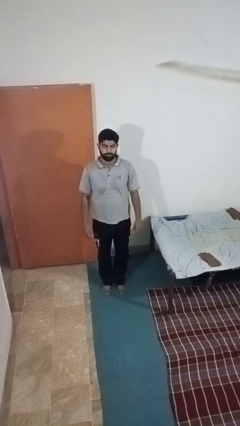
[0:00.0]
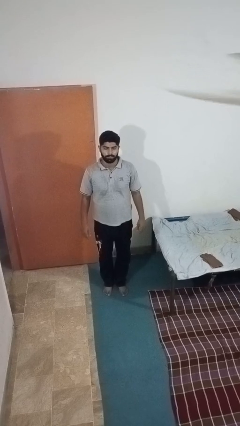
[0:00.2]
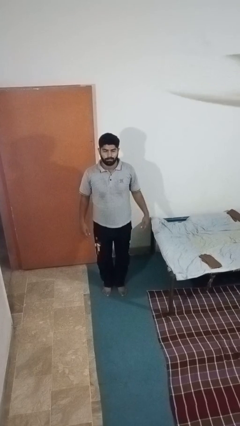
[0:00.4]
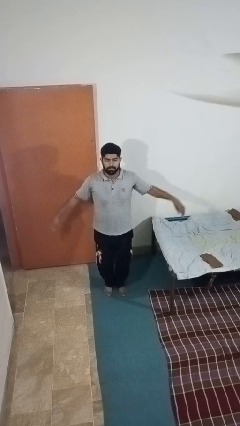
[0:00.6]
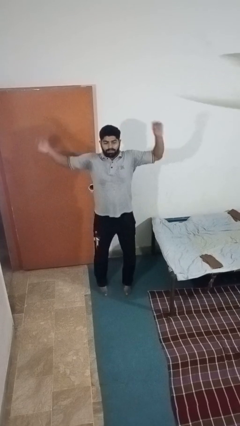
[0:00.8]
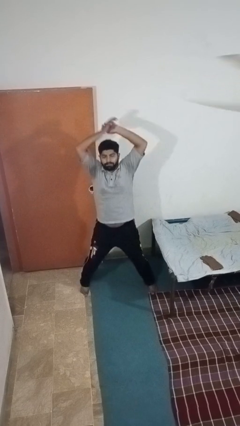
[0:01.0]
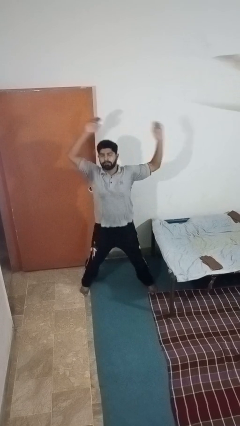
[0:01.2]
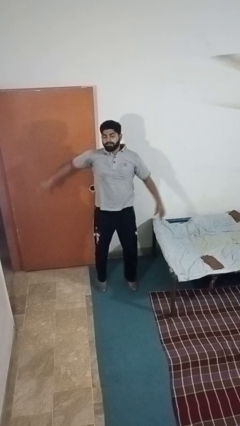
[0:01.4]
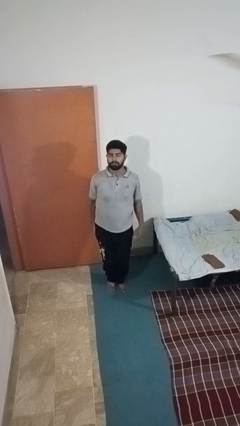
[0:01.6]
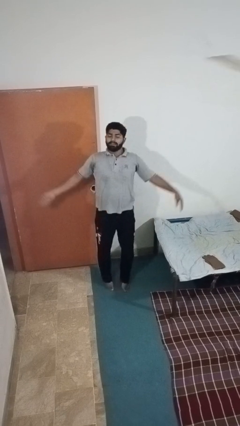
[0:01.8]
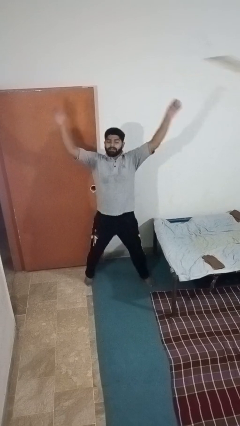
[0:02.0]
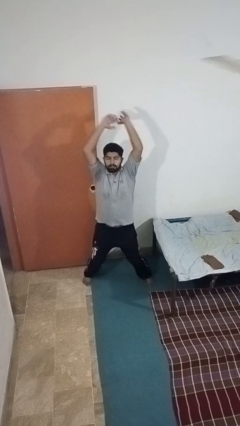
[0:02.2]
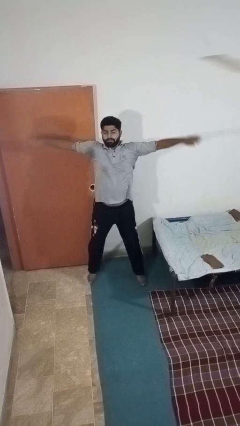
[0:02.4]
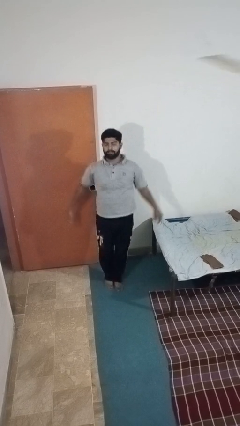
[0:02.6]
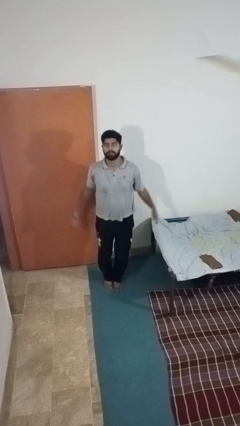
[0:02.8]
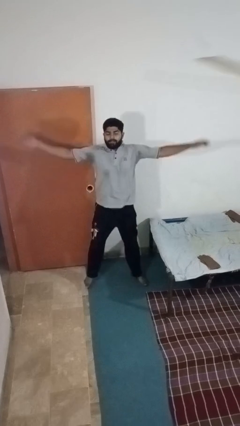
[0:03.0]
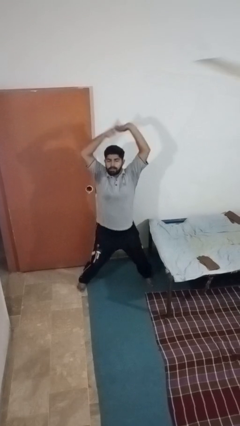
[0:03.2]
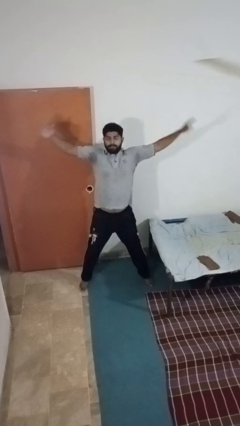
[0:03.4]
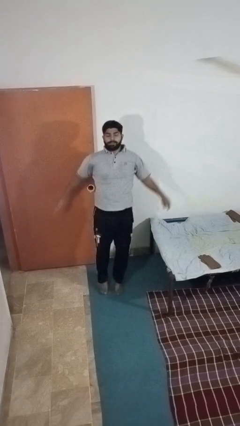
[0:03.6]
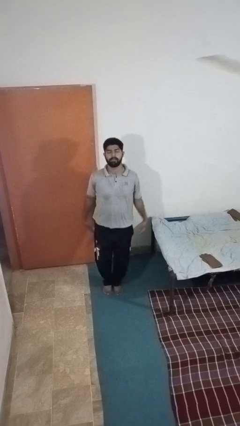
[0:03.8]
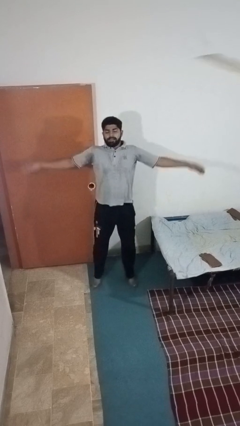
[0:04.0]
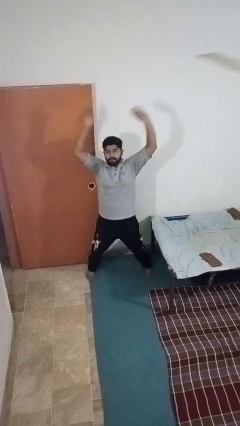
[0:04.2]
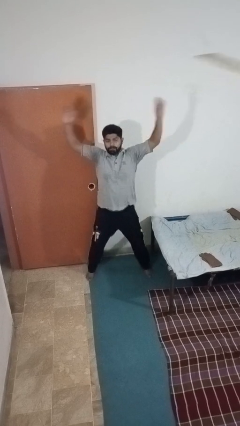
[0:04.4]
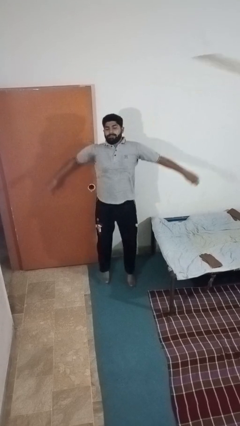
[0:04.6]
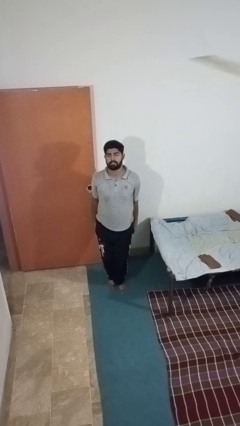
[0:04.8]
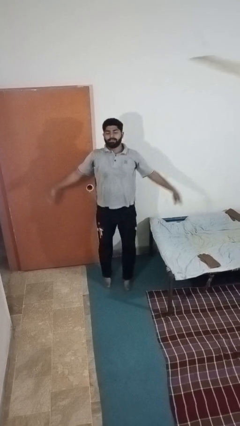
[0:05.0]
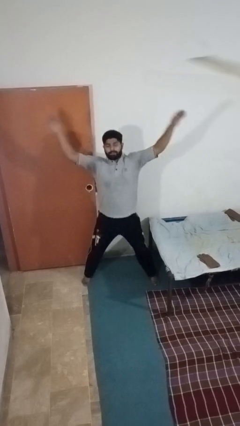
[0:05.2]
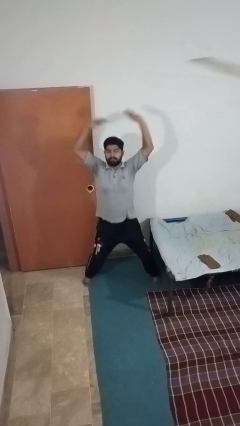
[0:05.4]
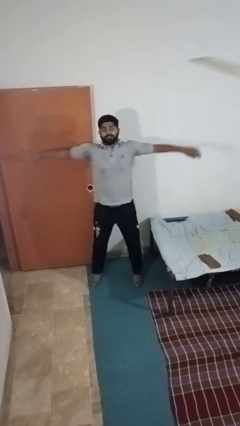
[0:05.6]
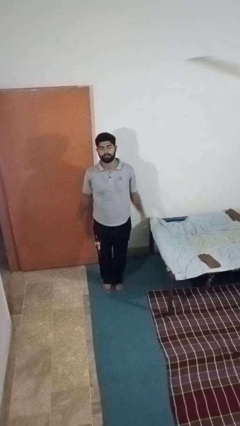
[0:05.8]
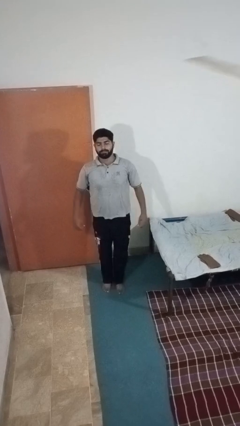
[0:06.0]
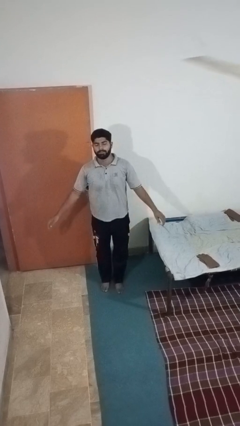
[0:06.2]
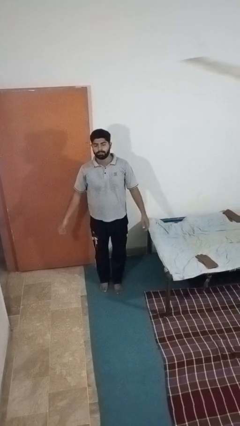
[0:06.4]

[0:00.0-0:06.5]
person exercises with jumping jacks

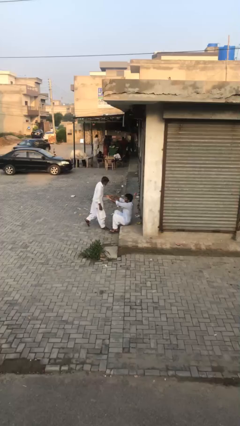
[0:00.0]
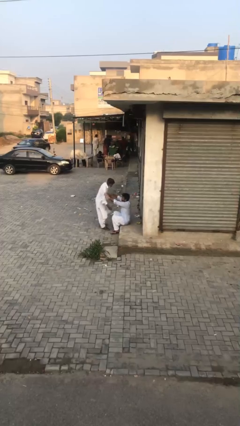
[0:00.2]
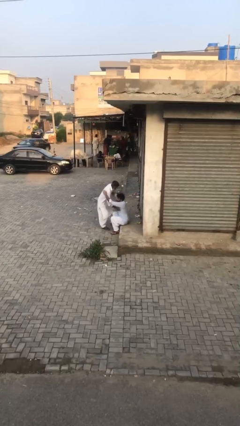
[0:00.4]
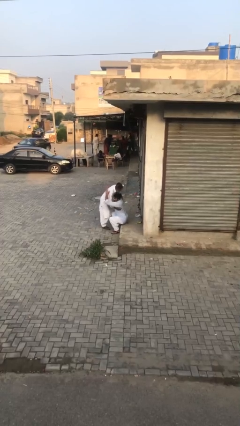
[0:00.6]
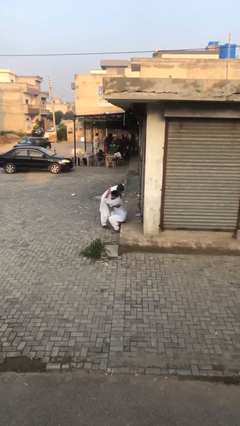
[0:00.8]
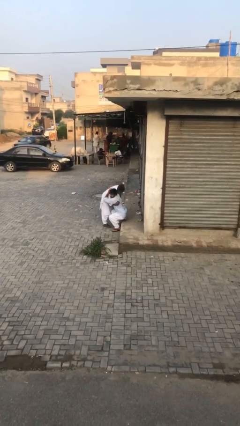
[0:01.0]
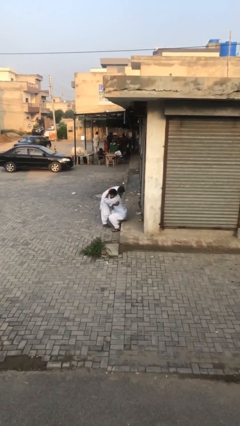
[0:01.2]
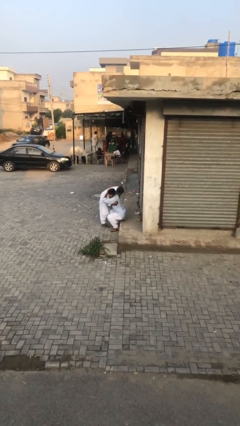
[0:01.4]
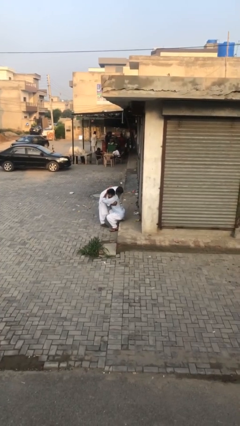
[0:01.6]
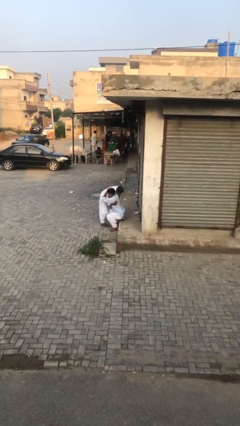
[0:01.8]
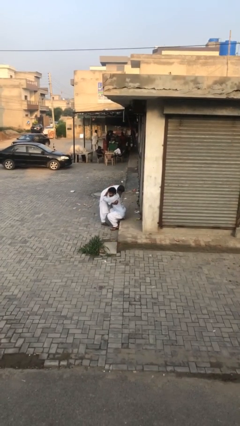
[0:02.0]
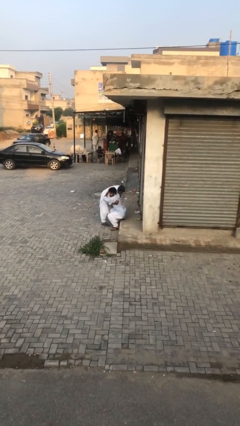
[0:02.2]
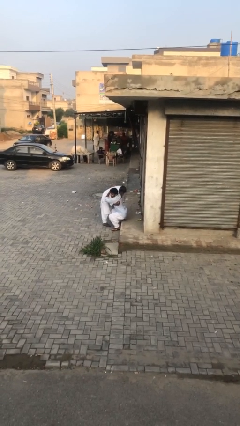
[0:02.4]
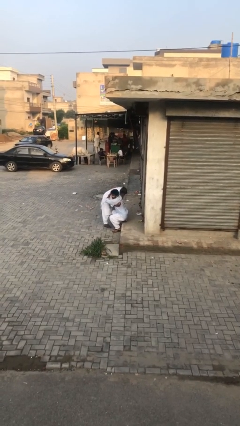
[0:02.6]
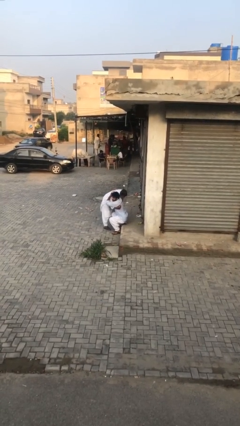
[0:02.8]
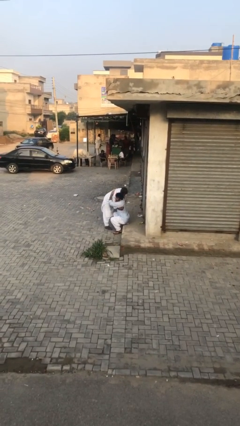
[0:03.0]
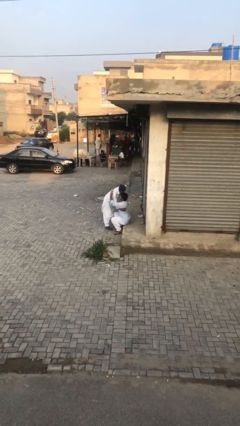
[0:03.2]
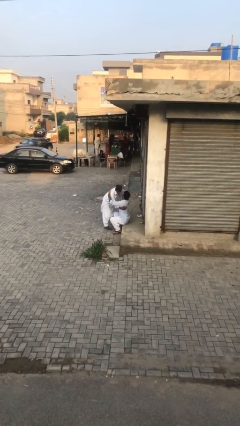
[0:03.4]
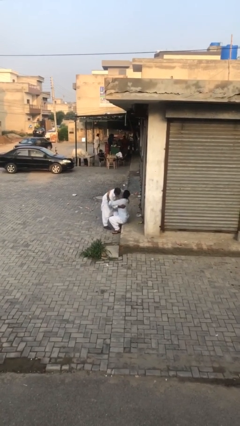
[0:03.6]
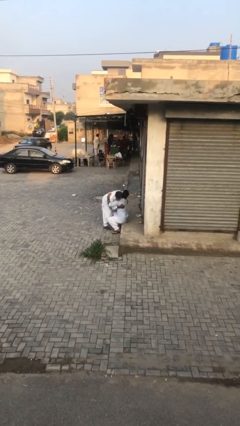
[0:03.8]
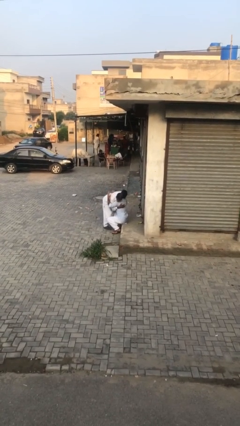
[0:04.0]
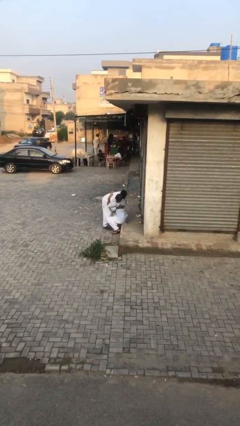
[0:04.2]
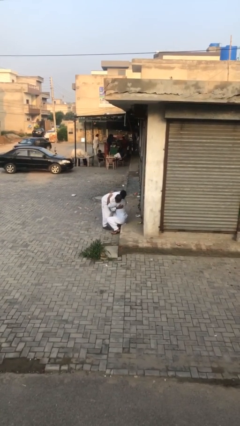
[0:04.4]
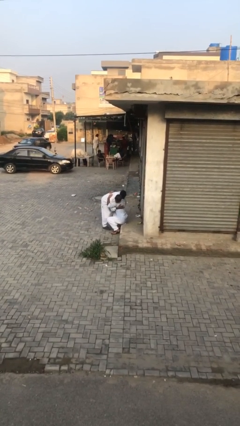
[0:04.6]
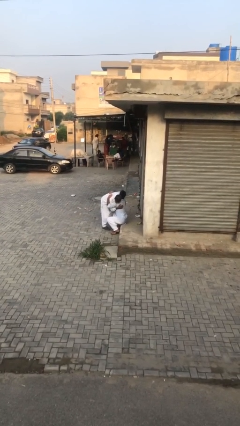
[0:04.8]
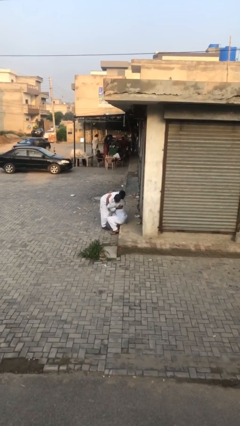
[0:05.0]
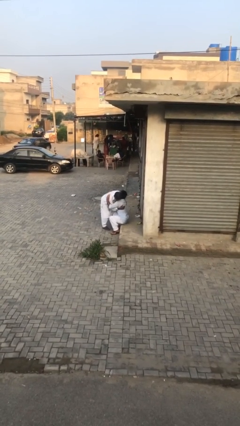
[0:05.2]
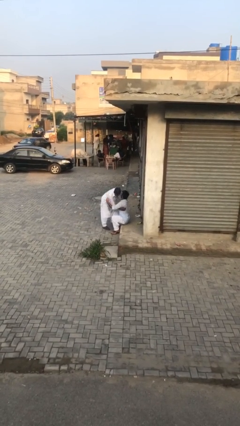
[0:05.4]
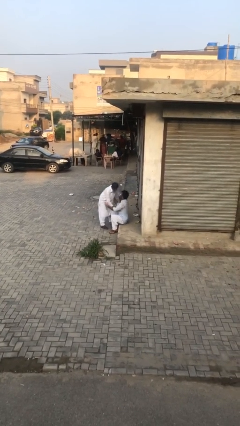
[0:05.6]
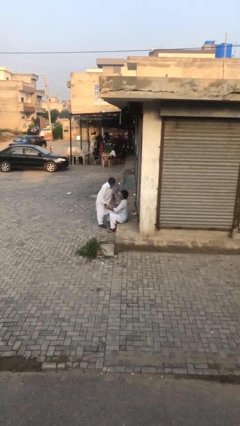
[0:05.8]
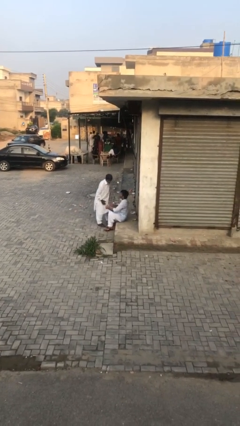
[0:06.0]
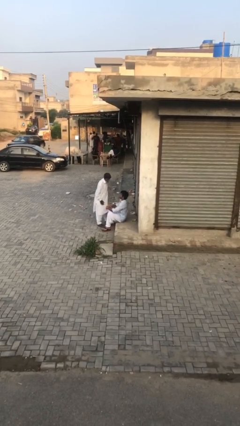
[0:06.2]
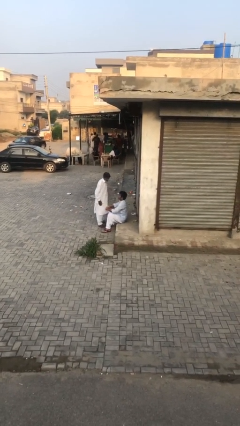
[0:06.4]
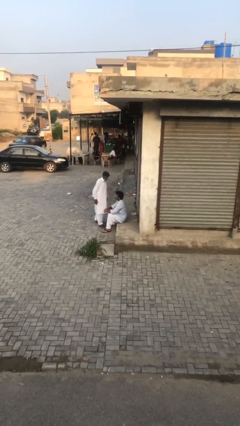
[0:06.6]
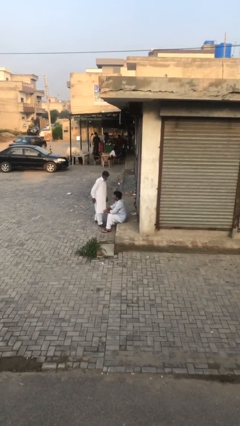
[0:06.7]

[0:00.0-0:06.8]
person embraces person

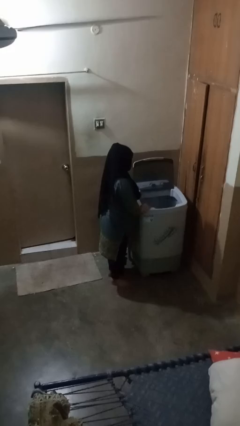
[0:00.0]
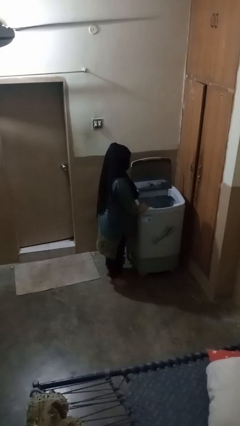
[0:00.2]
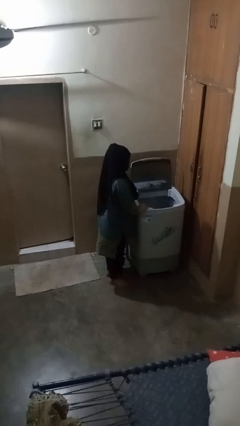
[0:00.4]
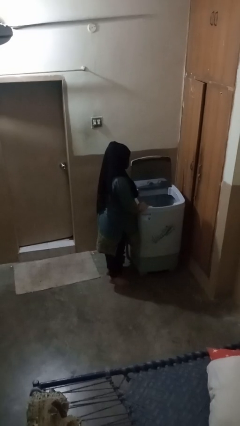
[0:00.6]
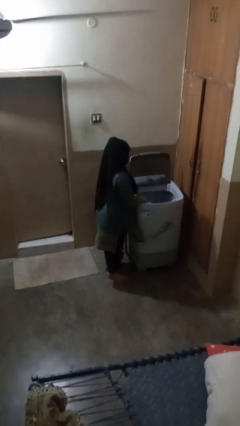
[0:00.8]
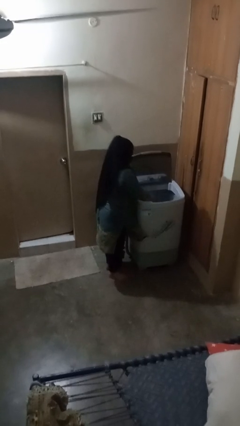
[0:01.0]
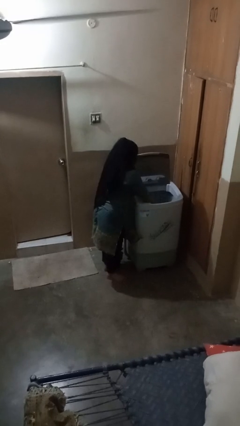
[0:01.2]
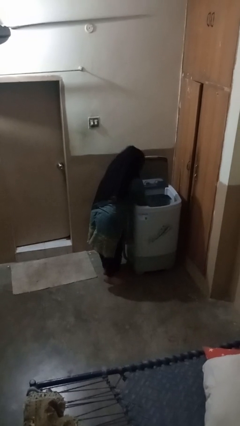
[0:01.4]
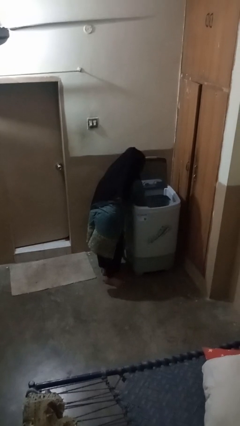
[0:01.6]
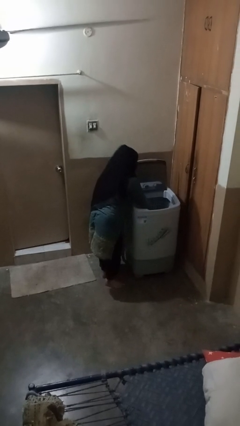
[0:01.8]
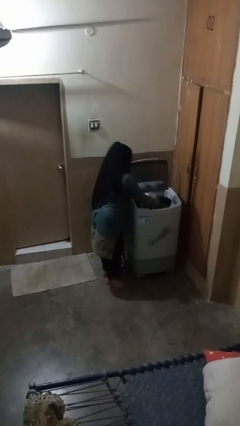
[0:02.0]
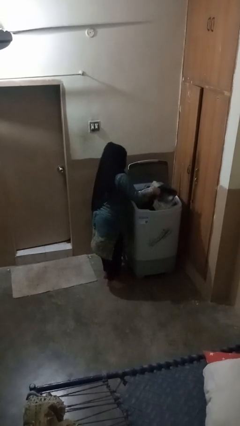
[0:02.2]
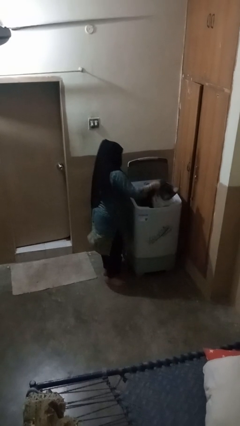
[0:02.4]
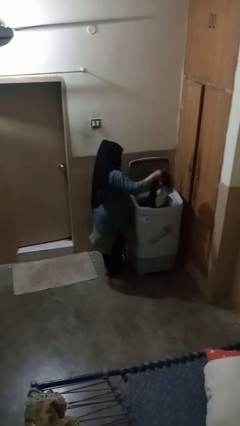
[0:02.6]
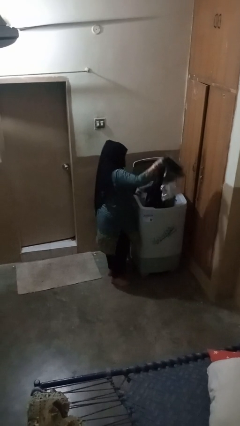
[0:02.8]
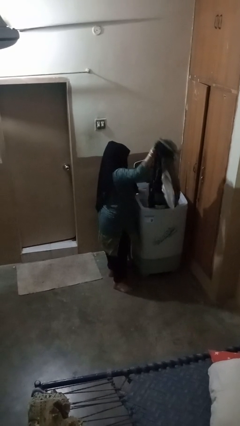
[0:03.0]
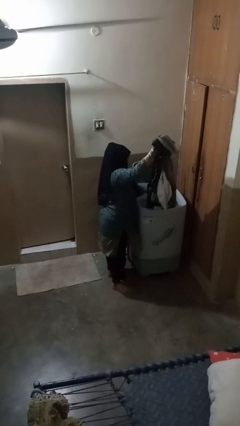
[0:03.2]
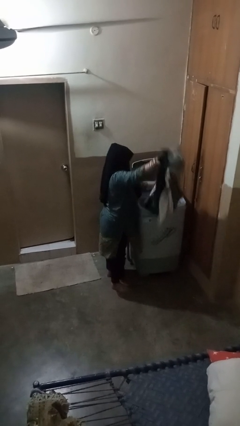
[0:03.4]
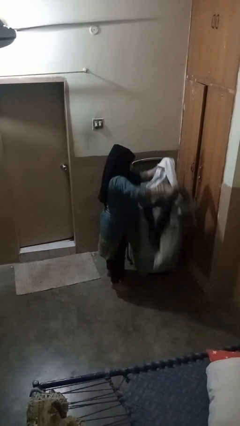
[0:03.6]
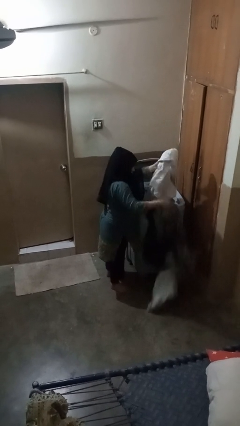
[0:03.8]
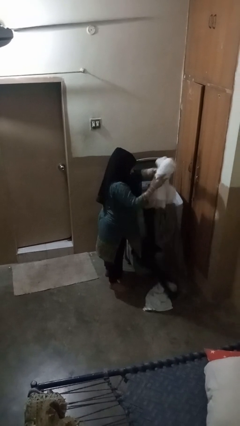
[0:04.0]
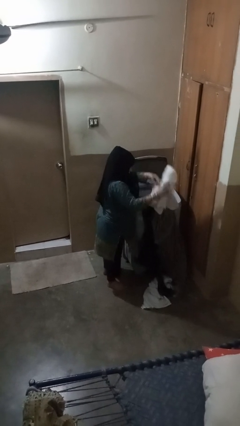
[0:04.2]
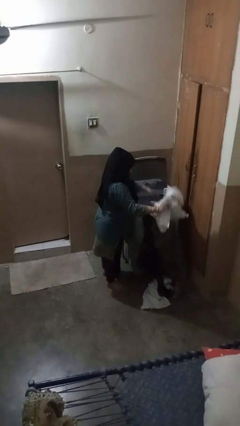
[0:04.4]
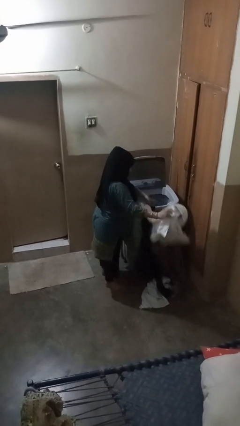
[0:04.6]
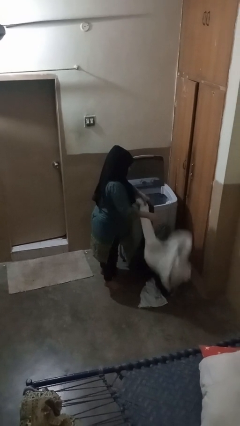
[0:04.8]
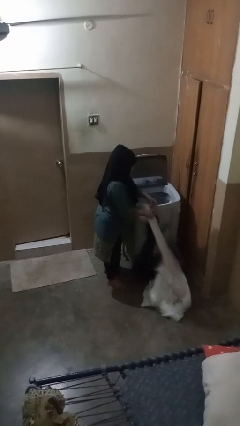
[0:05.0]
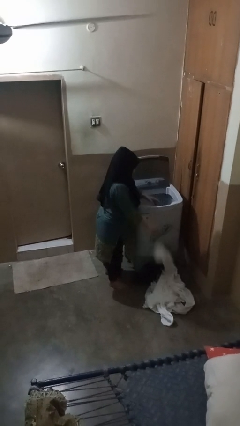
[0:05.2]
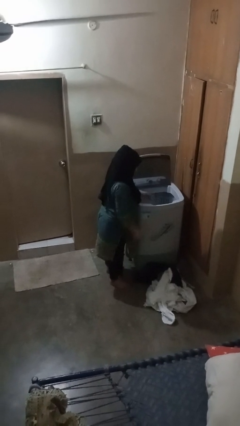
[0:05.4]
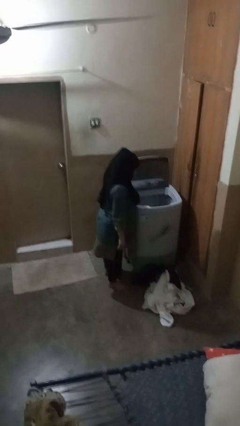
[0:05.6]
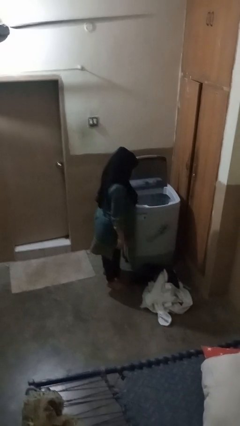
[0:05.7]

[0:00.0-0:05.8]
person unloads clotheswasher
